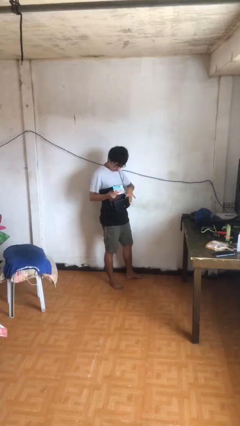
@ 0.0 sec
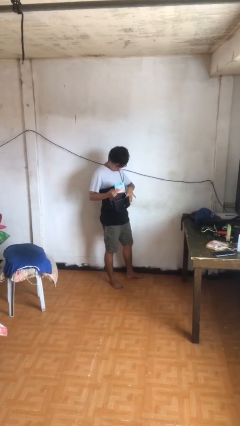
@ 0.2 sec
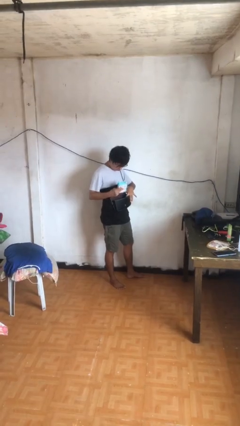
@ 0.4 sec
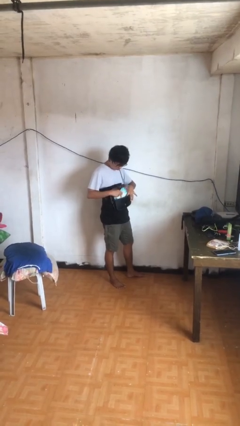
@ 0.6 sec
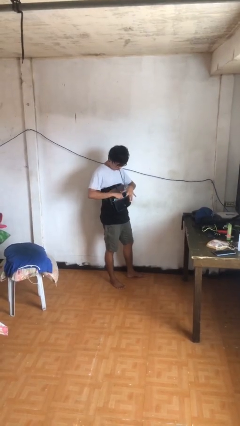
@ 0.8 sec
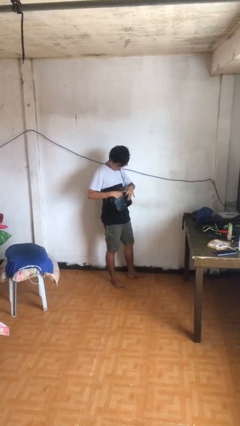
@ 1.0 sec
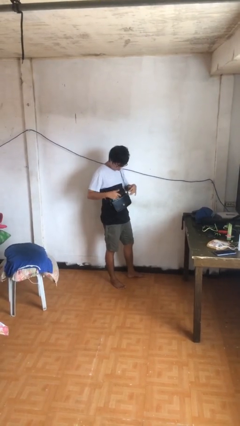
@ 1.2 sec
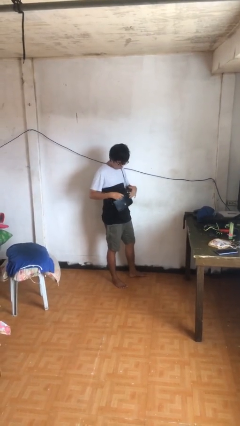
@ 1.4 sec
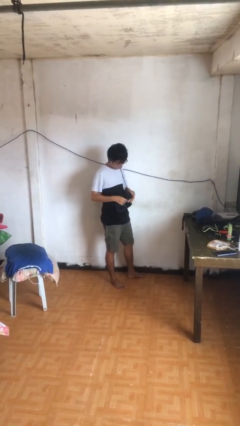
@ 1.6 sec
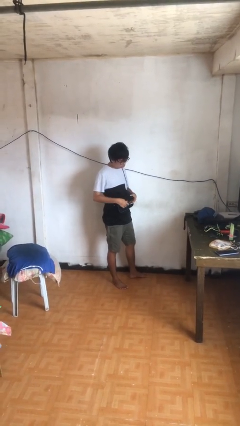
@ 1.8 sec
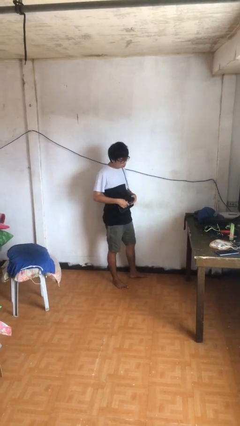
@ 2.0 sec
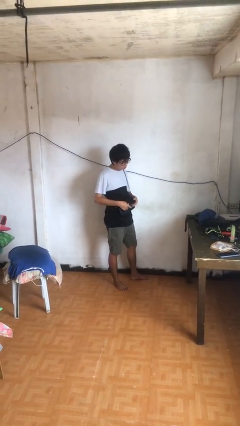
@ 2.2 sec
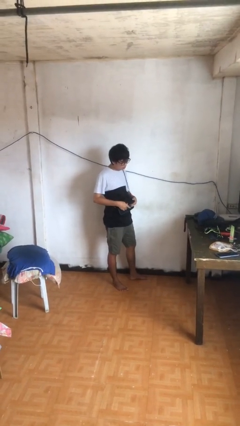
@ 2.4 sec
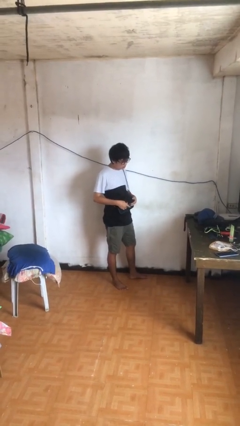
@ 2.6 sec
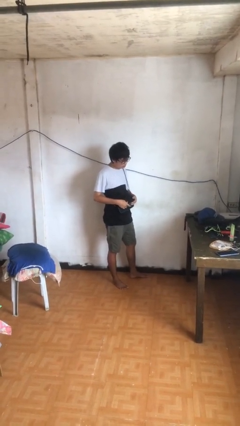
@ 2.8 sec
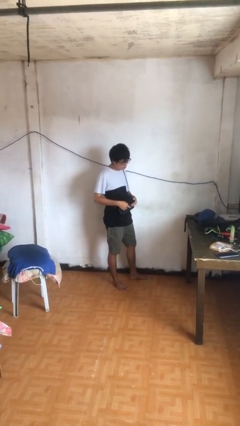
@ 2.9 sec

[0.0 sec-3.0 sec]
person puts object into purse

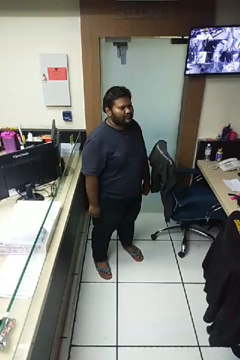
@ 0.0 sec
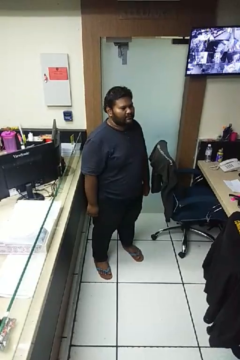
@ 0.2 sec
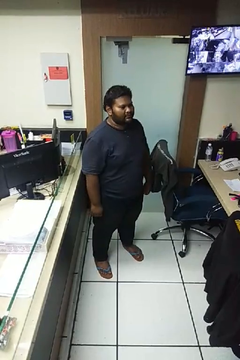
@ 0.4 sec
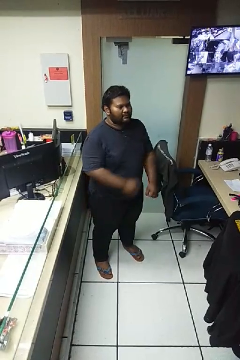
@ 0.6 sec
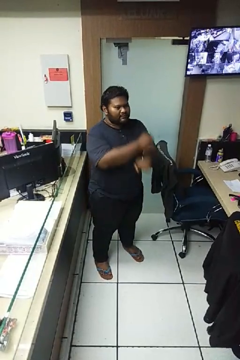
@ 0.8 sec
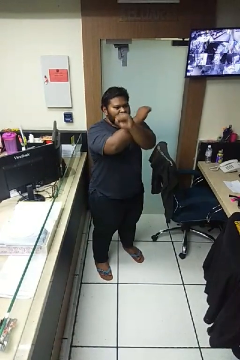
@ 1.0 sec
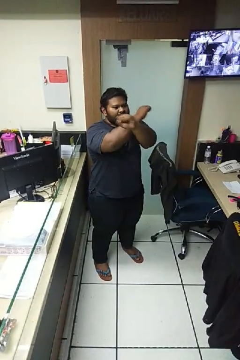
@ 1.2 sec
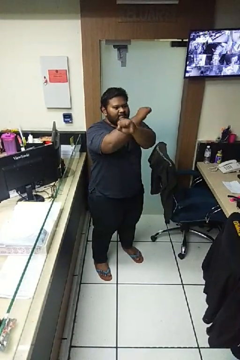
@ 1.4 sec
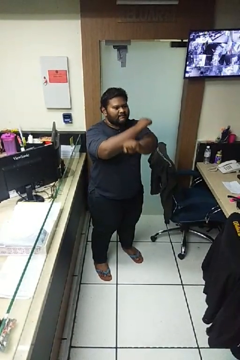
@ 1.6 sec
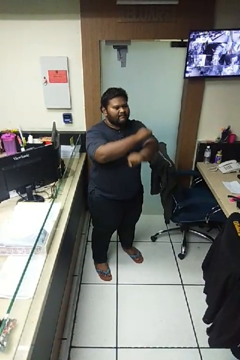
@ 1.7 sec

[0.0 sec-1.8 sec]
person gestures arms x

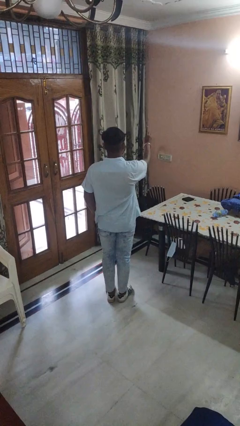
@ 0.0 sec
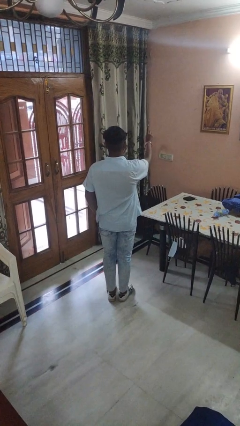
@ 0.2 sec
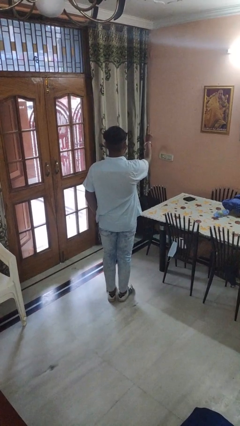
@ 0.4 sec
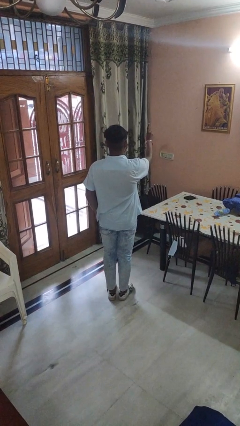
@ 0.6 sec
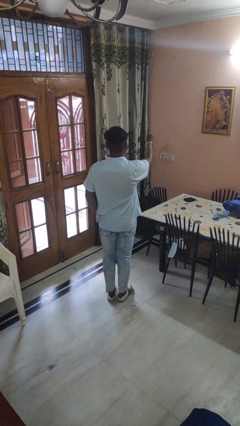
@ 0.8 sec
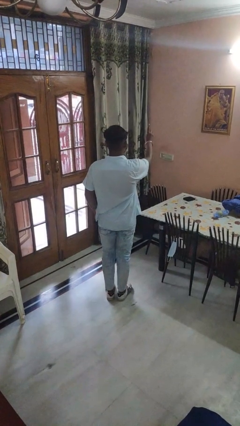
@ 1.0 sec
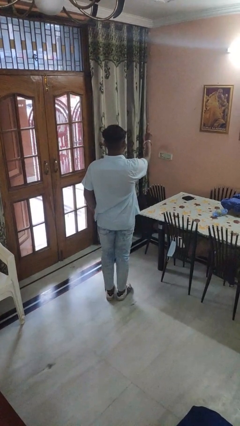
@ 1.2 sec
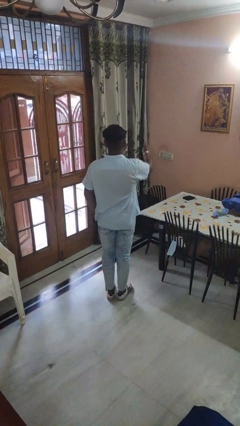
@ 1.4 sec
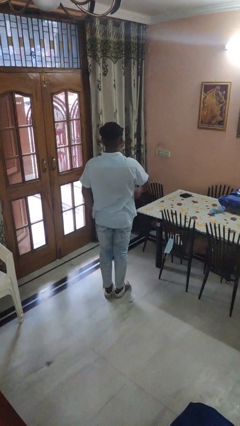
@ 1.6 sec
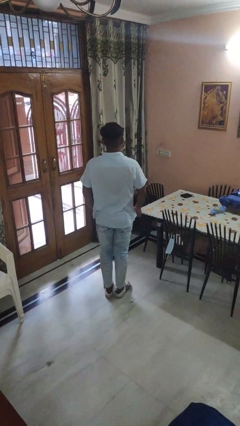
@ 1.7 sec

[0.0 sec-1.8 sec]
person gestures number one

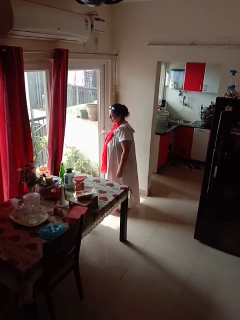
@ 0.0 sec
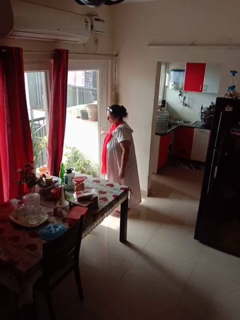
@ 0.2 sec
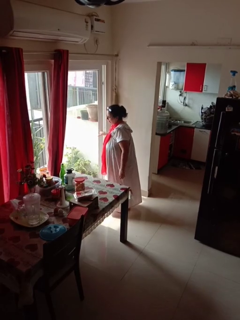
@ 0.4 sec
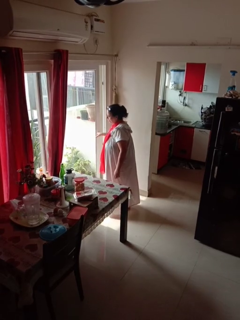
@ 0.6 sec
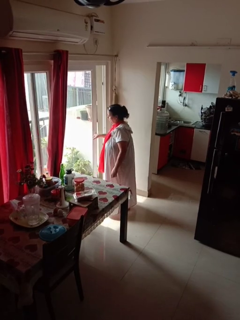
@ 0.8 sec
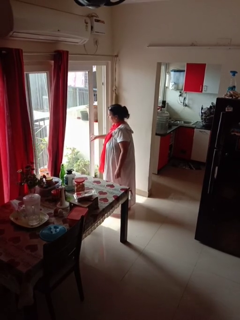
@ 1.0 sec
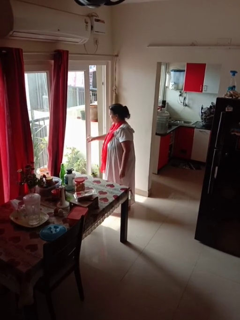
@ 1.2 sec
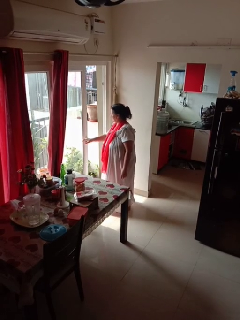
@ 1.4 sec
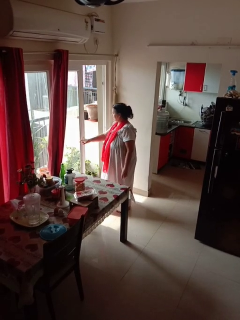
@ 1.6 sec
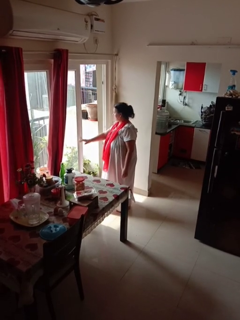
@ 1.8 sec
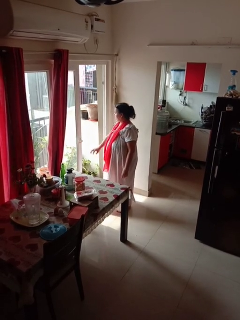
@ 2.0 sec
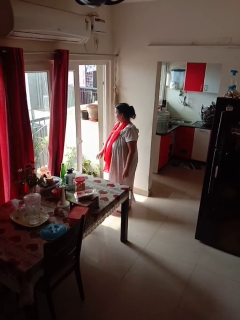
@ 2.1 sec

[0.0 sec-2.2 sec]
person opens sliding door

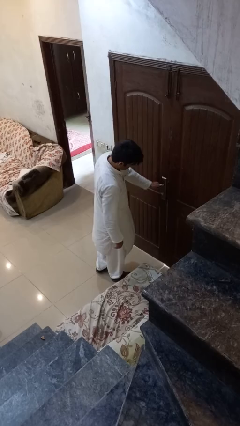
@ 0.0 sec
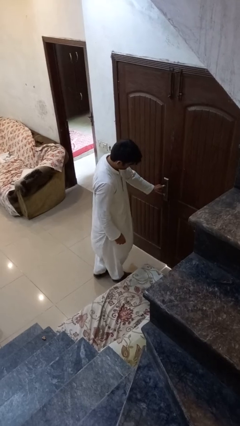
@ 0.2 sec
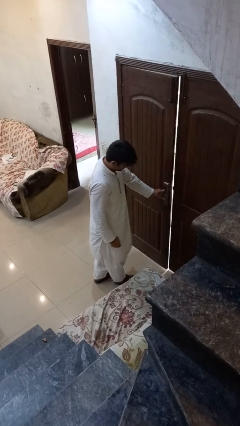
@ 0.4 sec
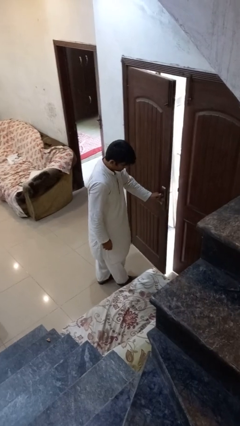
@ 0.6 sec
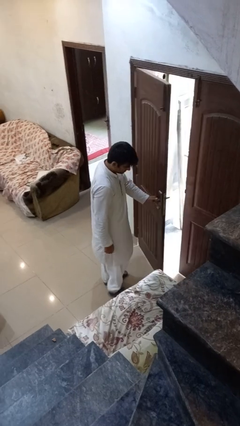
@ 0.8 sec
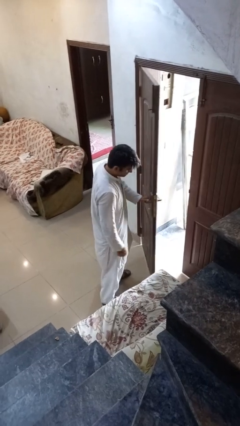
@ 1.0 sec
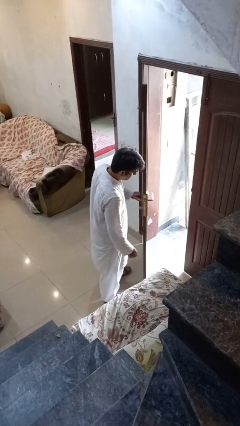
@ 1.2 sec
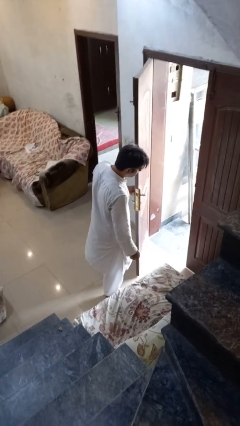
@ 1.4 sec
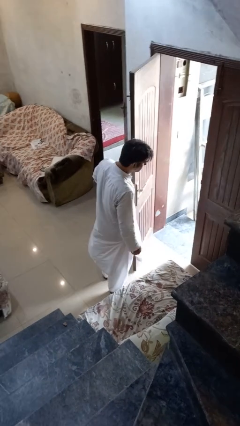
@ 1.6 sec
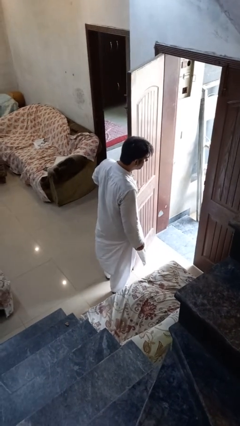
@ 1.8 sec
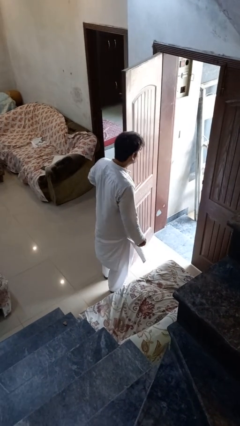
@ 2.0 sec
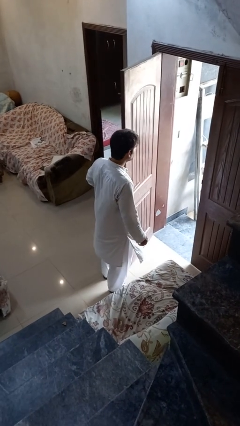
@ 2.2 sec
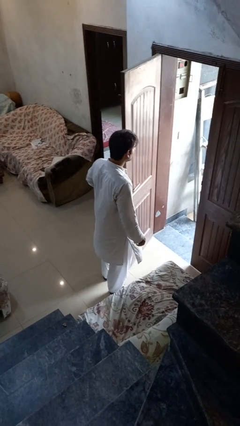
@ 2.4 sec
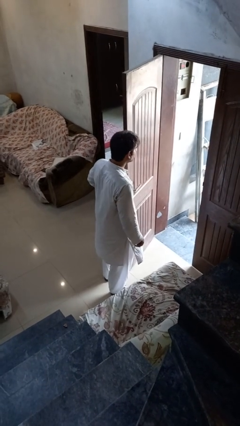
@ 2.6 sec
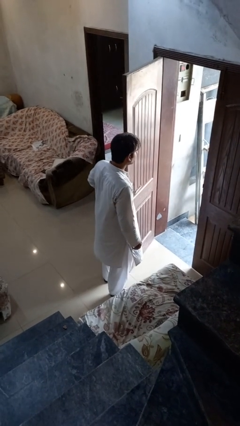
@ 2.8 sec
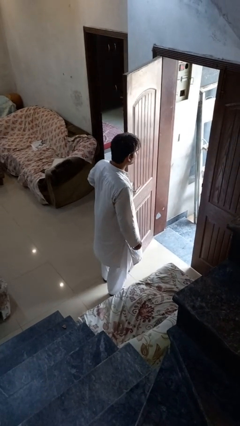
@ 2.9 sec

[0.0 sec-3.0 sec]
person opens facility door

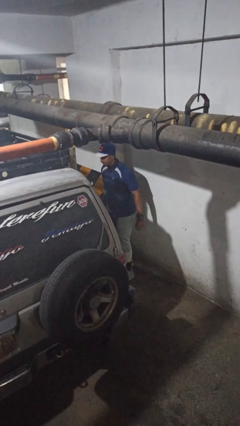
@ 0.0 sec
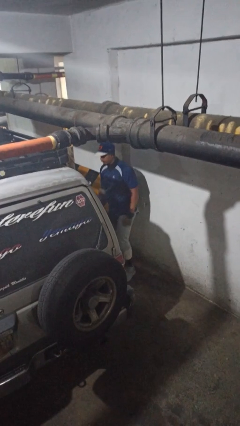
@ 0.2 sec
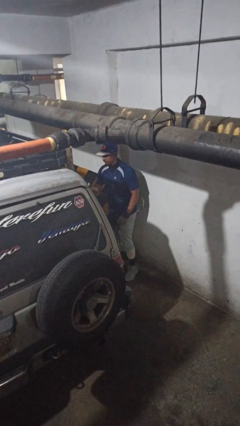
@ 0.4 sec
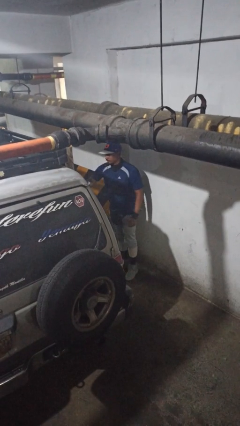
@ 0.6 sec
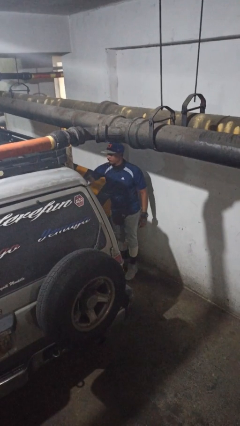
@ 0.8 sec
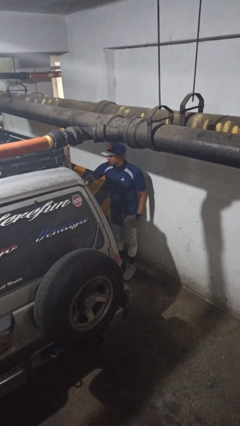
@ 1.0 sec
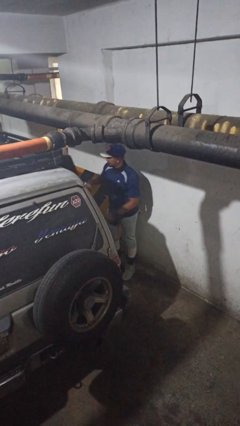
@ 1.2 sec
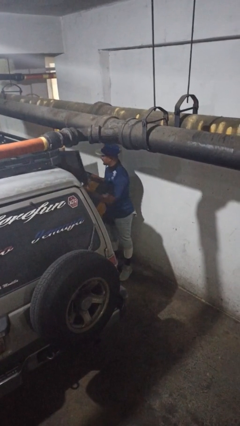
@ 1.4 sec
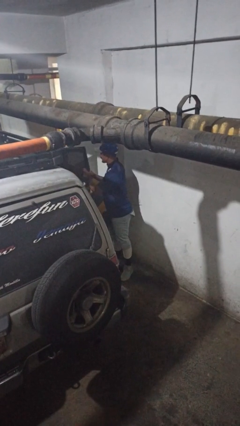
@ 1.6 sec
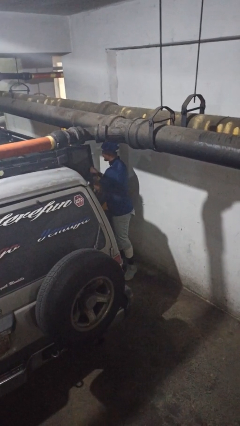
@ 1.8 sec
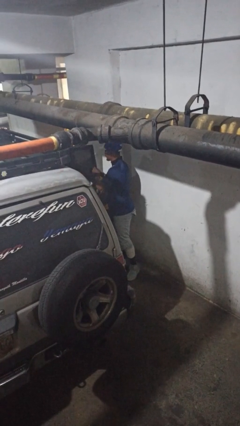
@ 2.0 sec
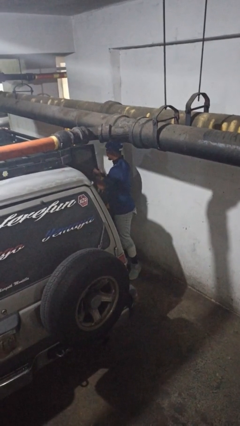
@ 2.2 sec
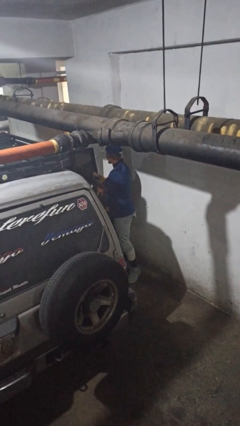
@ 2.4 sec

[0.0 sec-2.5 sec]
person opens car door

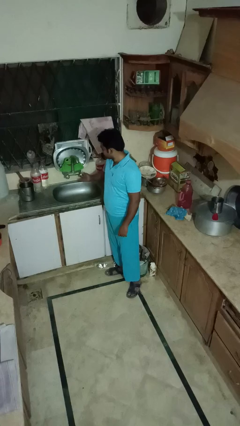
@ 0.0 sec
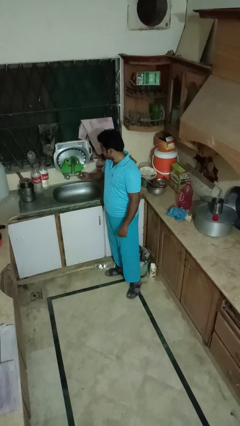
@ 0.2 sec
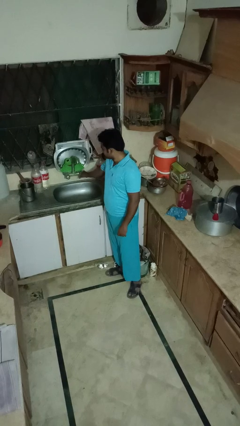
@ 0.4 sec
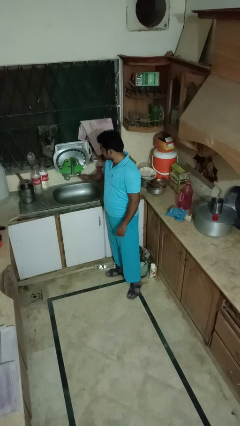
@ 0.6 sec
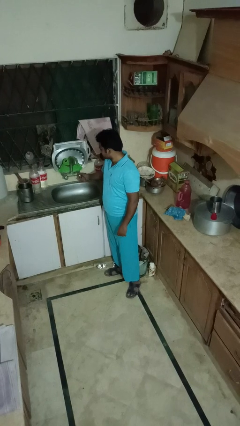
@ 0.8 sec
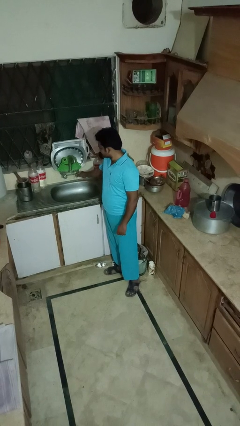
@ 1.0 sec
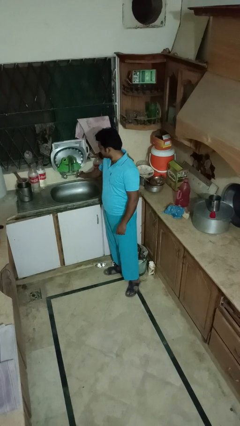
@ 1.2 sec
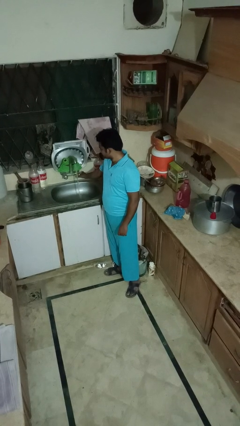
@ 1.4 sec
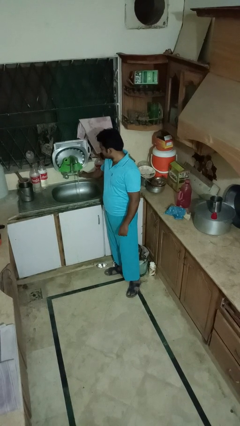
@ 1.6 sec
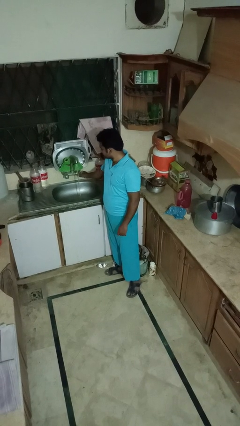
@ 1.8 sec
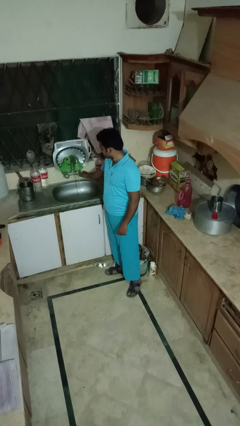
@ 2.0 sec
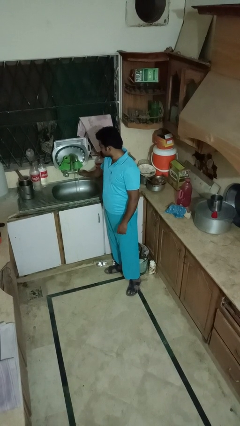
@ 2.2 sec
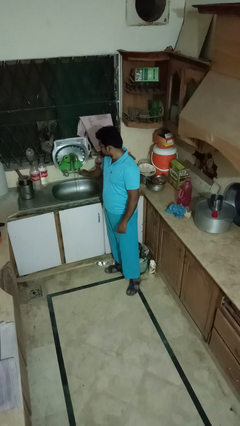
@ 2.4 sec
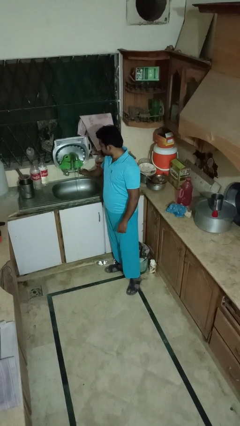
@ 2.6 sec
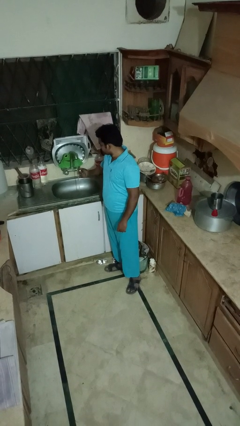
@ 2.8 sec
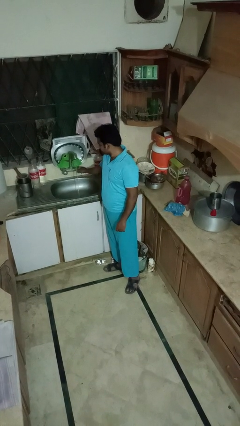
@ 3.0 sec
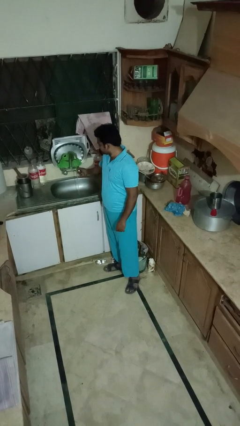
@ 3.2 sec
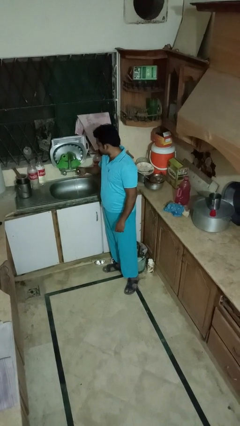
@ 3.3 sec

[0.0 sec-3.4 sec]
person turns on faucet
